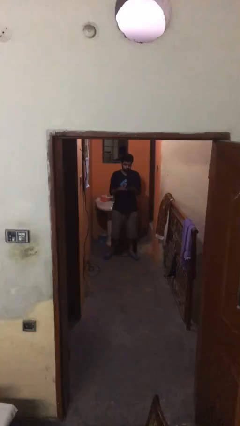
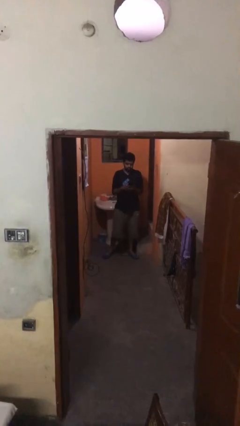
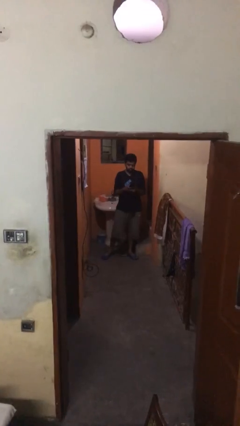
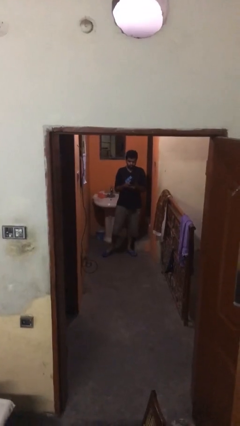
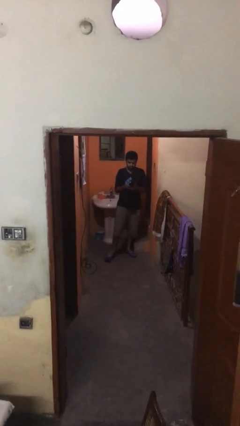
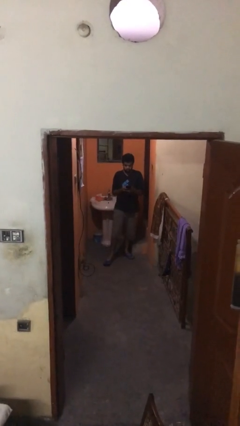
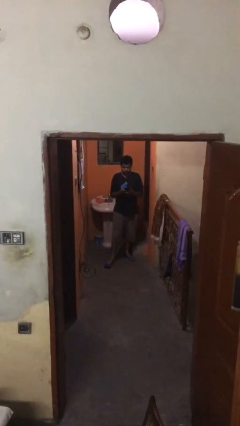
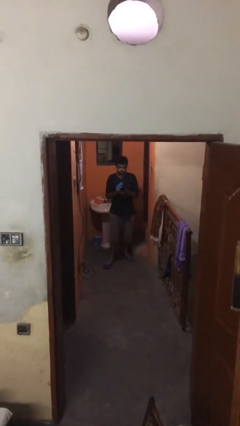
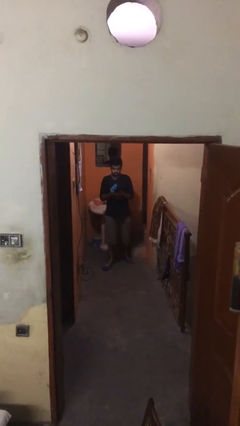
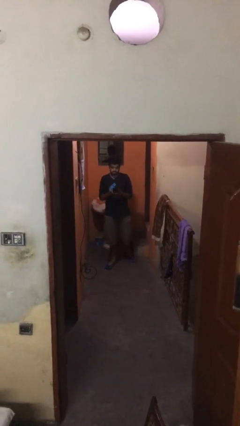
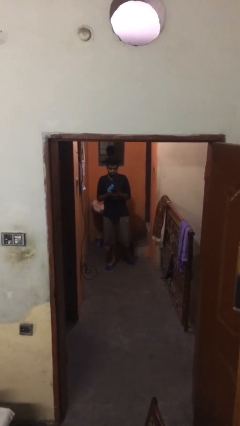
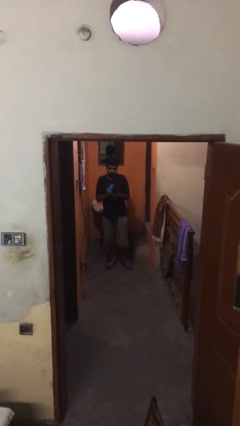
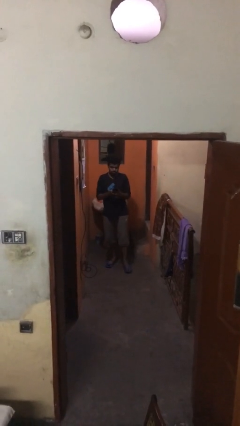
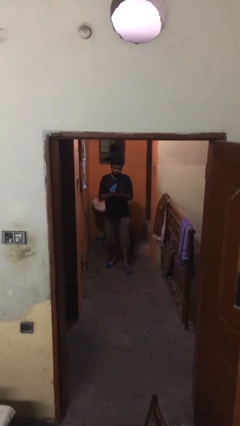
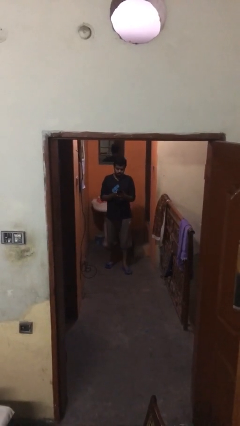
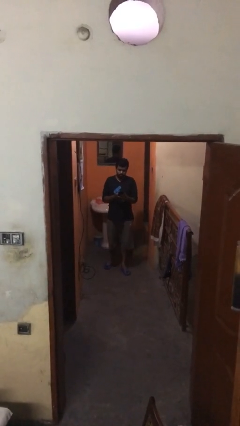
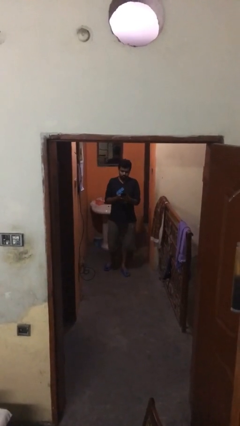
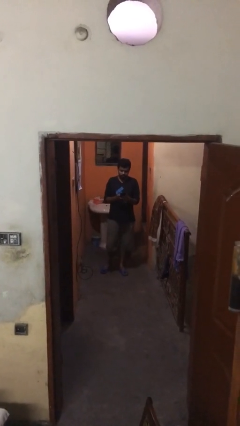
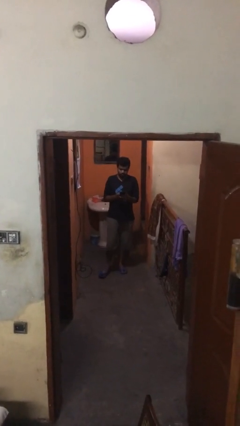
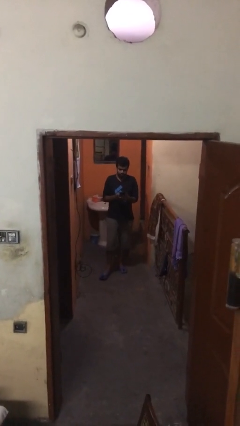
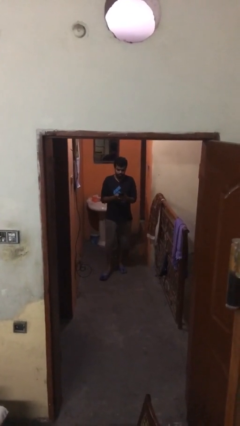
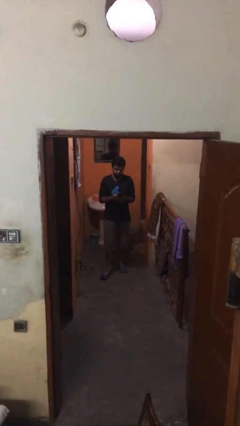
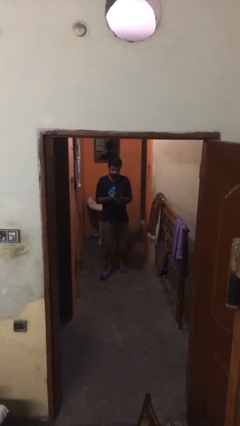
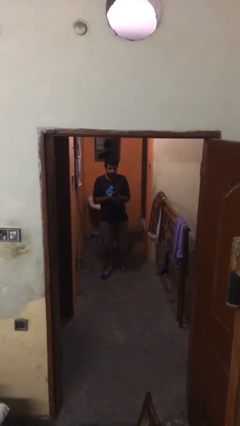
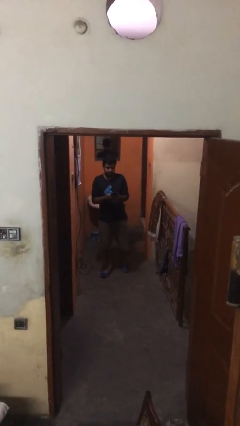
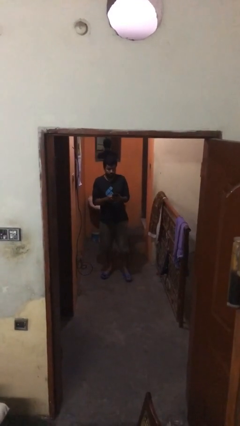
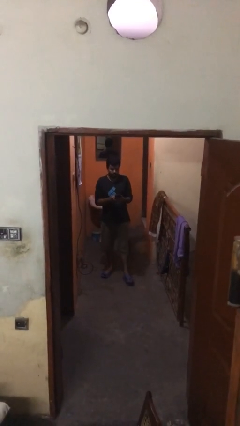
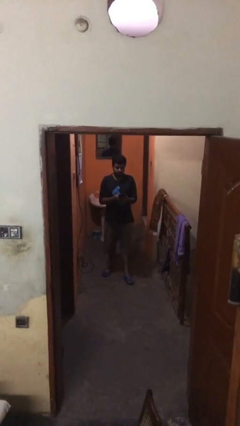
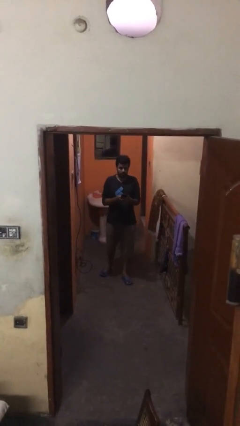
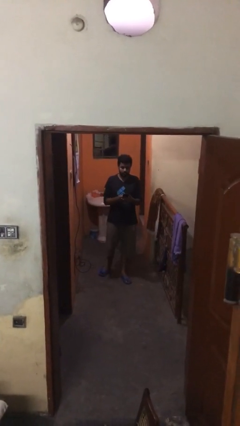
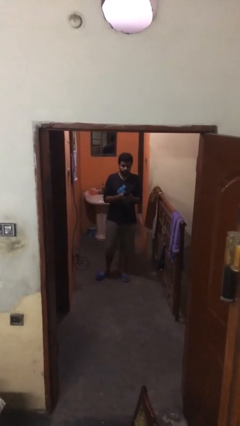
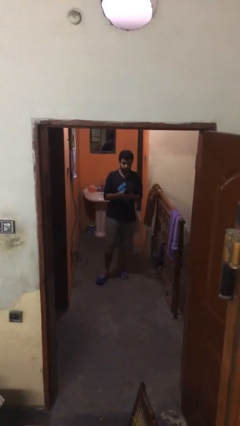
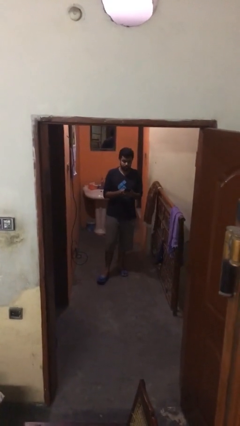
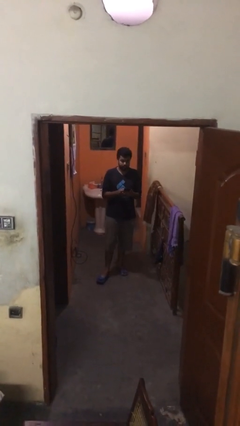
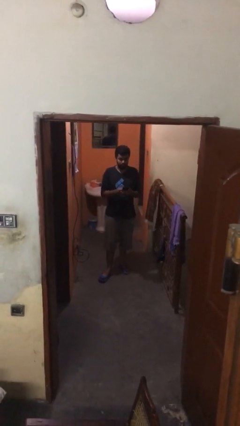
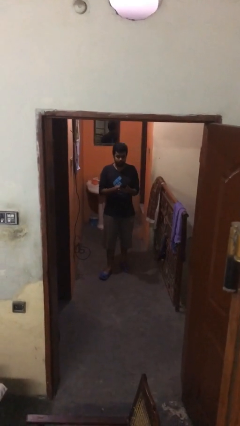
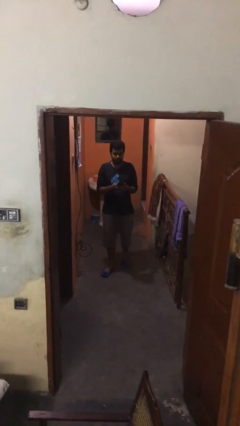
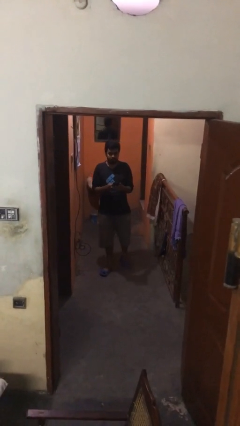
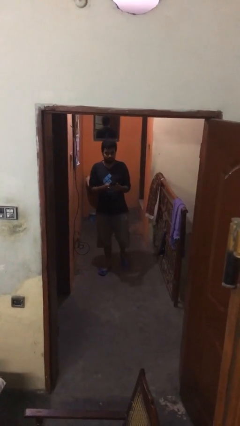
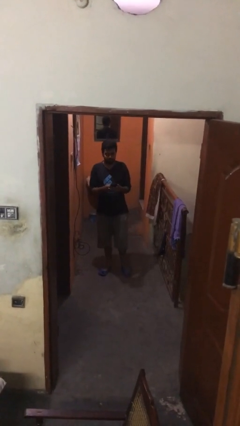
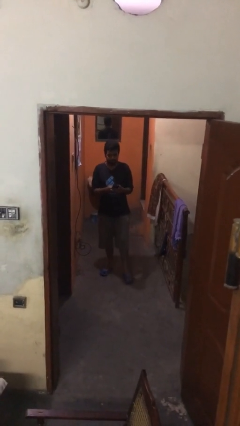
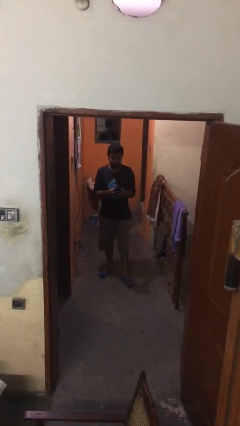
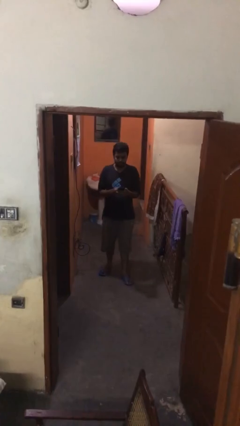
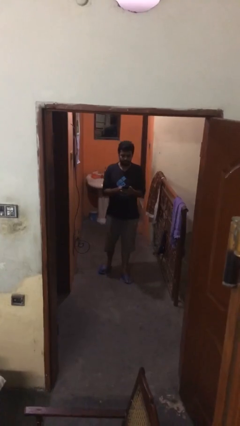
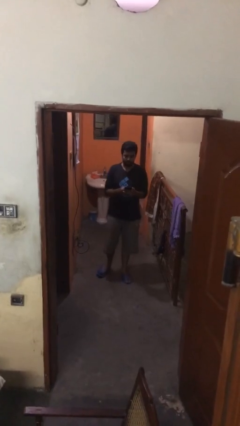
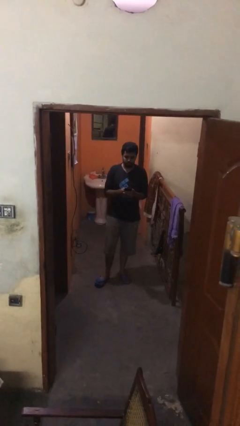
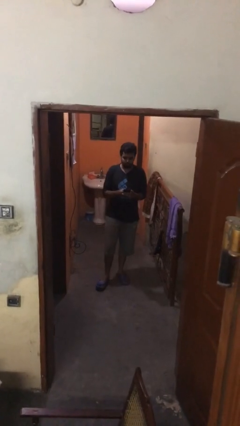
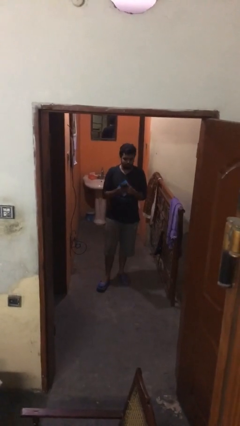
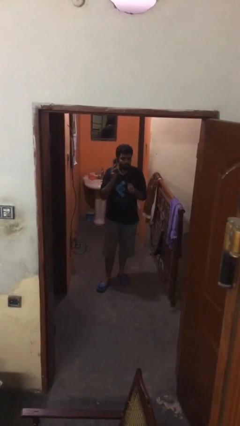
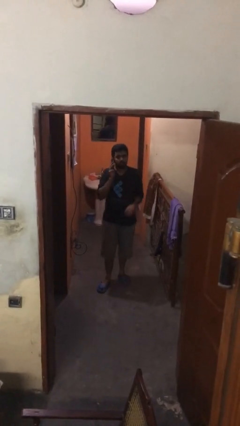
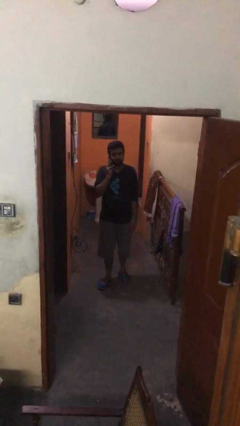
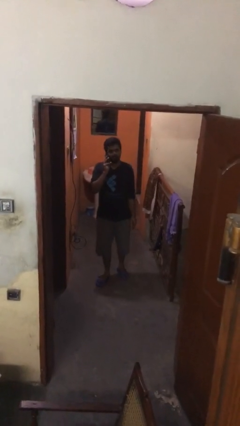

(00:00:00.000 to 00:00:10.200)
person texts on phone

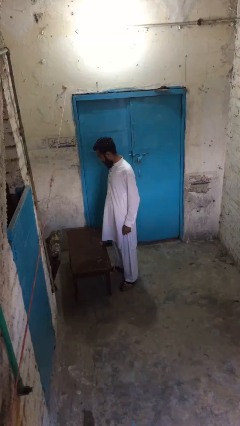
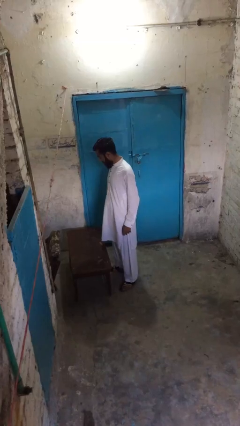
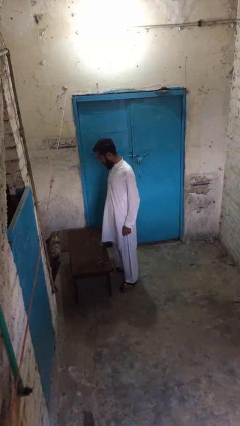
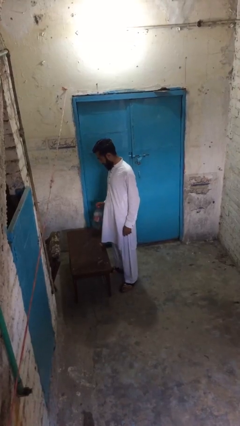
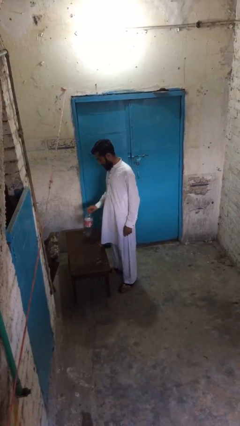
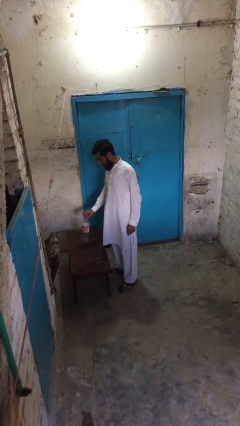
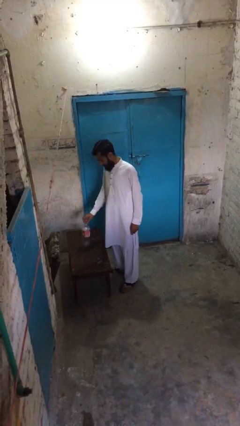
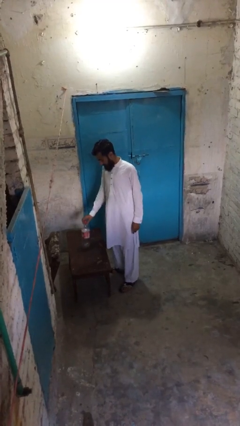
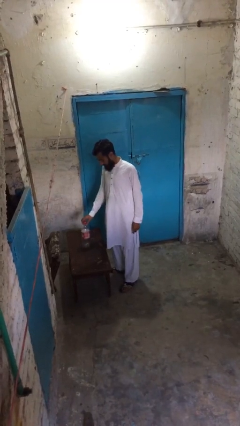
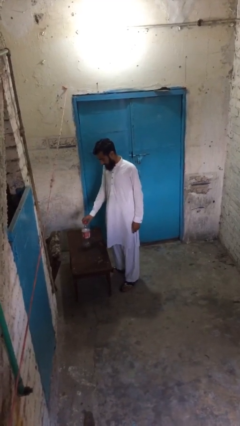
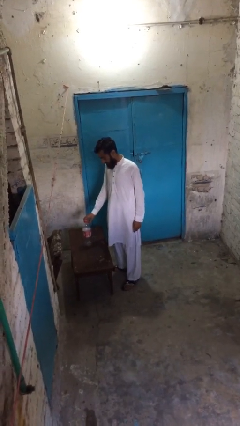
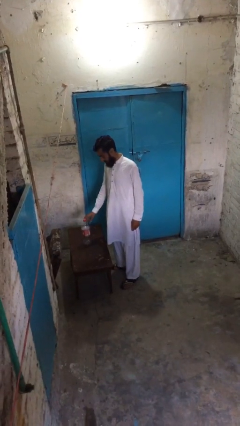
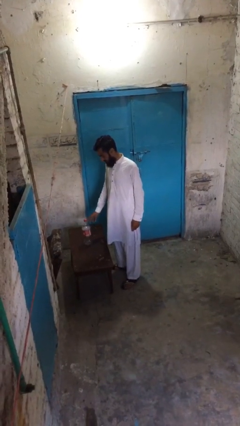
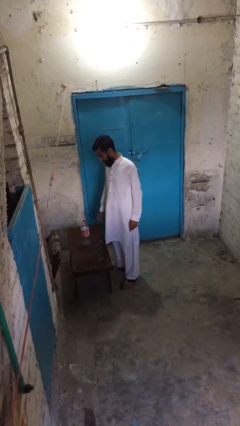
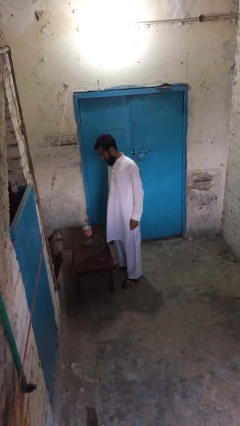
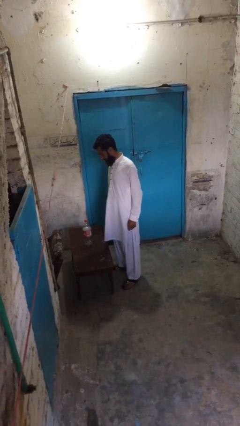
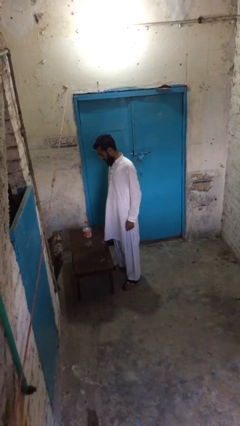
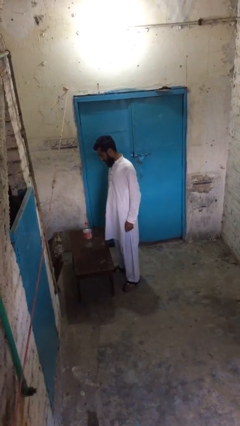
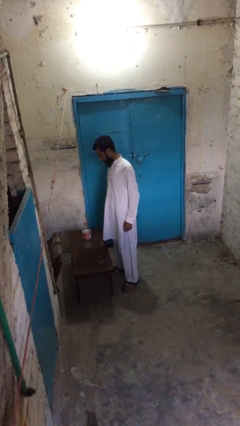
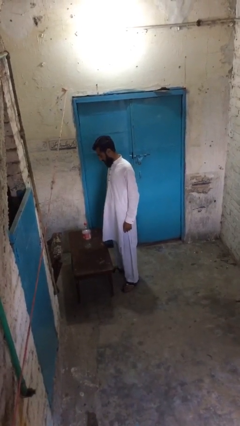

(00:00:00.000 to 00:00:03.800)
person puts down object on table

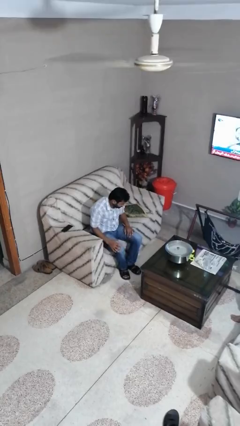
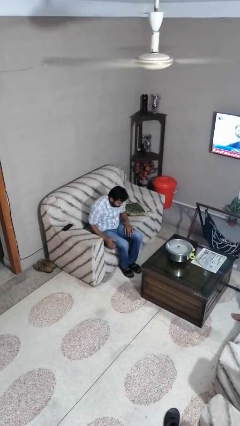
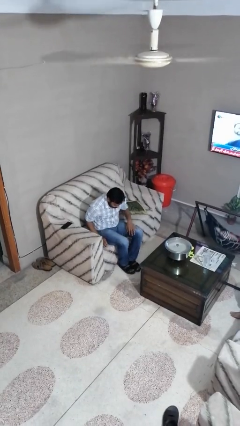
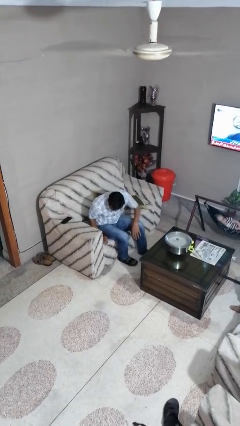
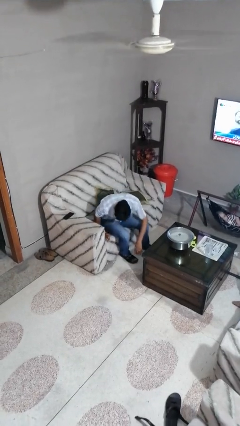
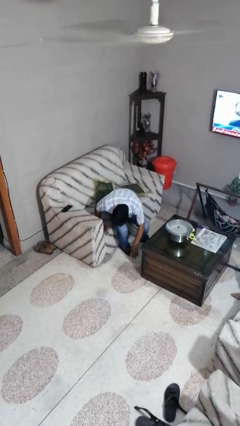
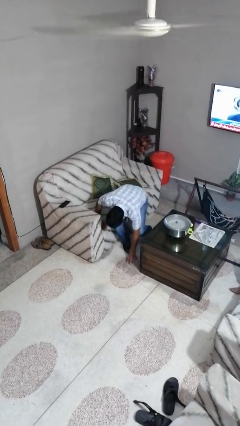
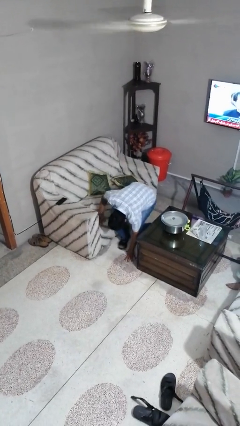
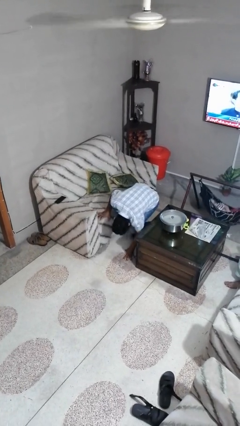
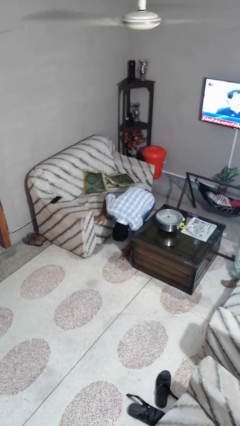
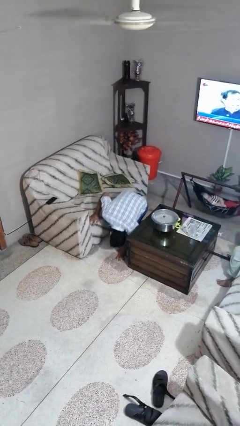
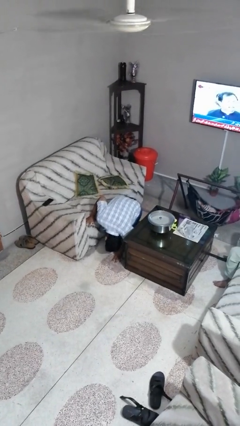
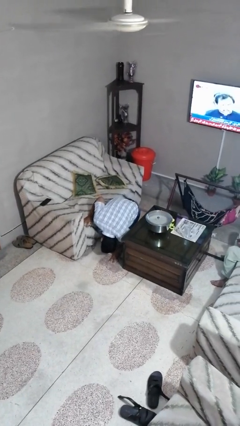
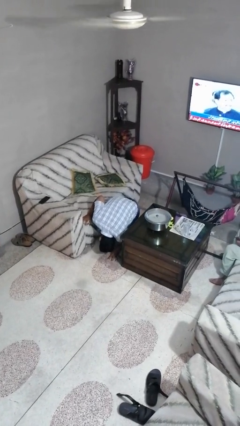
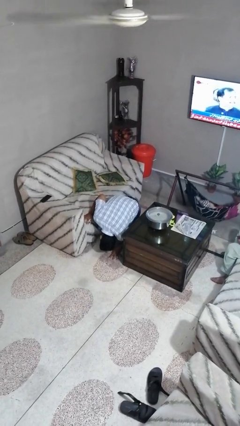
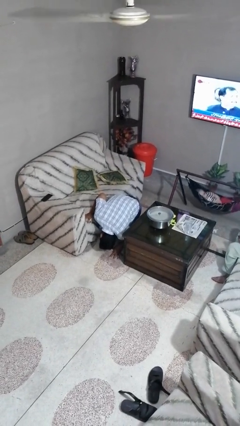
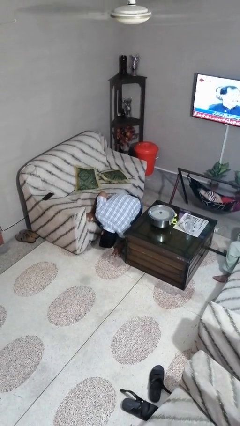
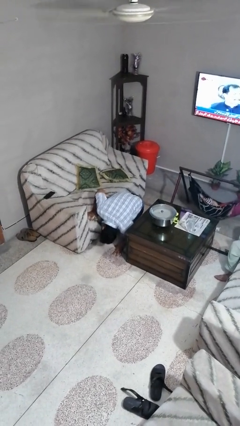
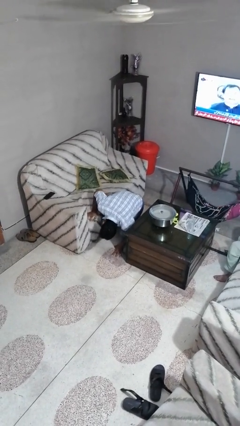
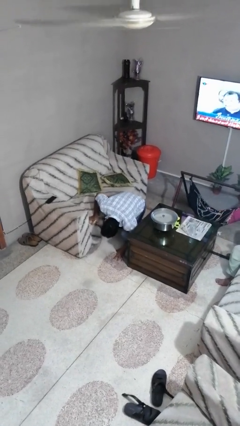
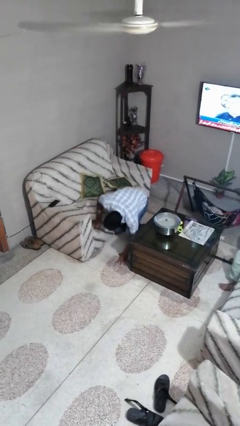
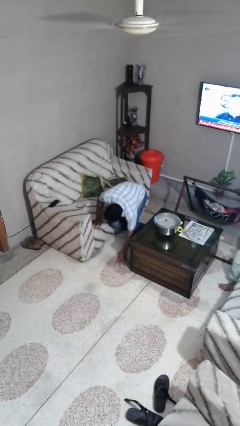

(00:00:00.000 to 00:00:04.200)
person searches under couch
